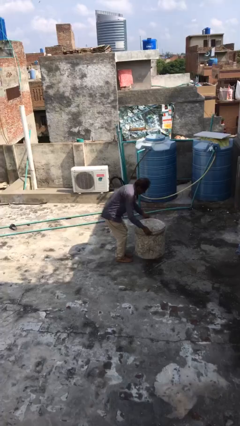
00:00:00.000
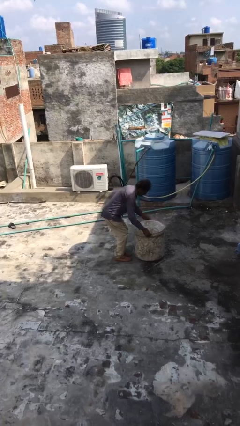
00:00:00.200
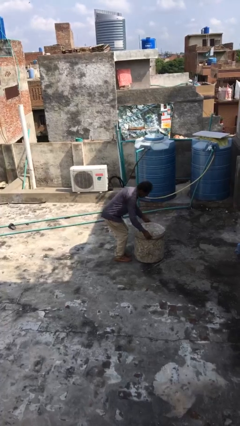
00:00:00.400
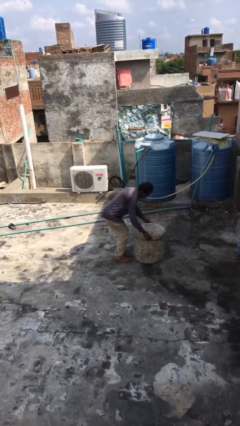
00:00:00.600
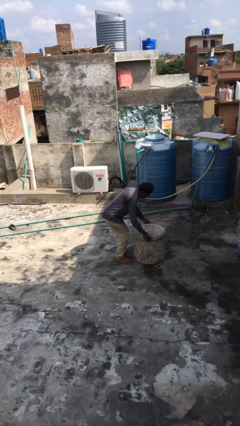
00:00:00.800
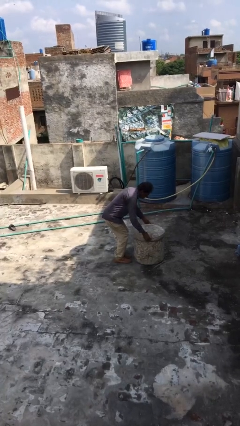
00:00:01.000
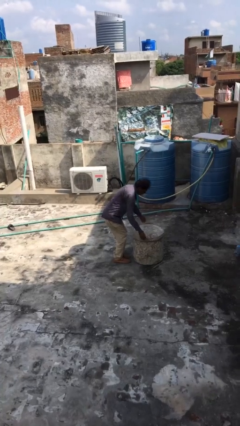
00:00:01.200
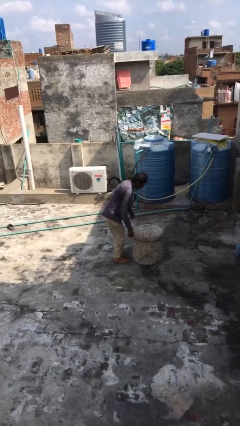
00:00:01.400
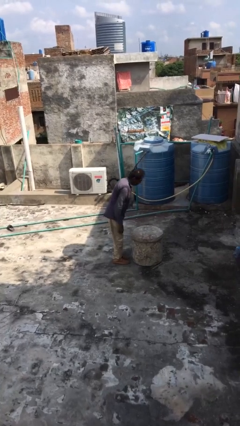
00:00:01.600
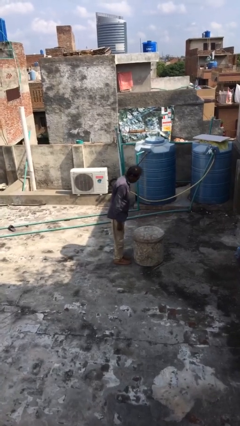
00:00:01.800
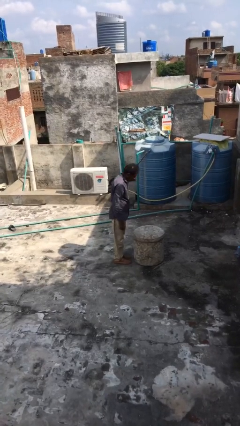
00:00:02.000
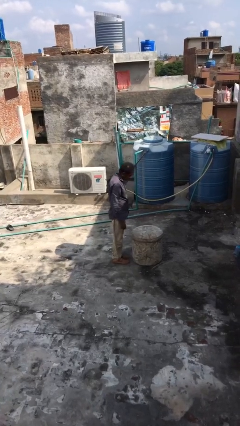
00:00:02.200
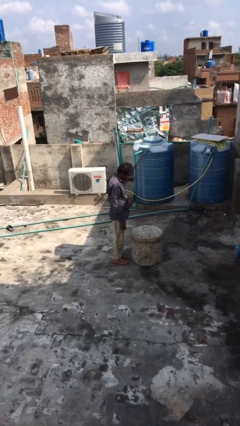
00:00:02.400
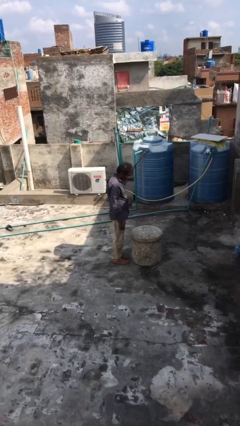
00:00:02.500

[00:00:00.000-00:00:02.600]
person puts down object on floor

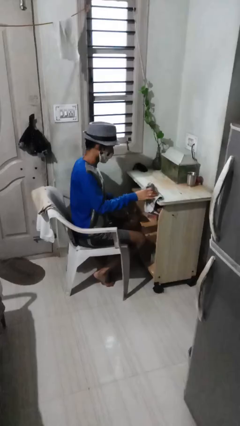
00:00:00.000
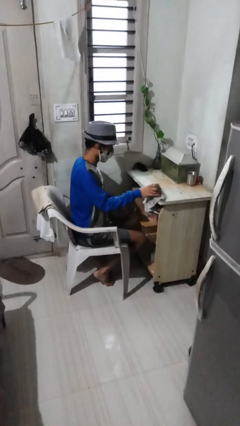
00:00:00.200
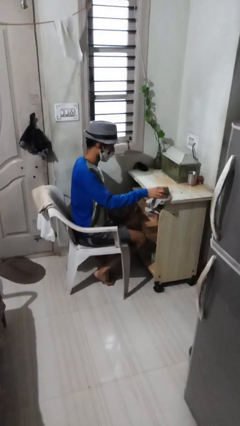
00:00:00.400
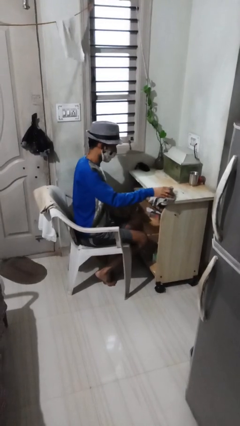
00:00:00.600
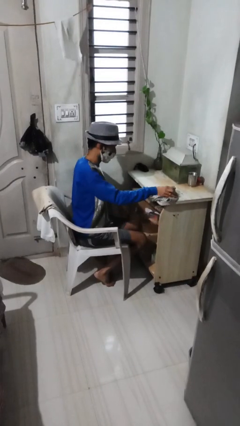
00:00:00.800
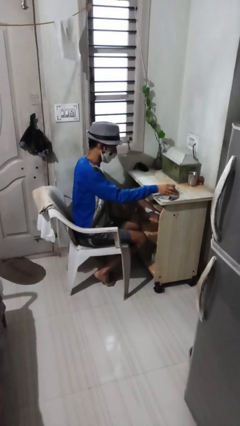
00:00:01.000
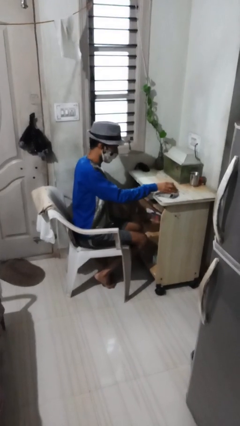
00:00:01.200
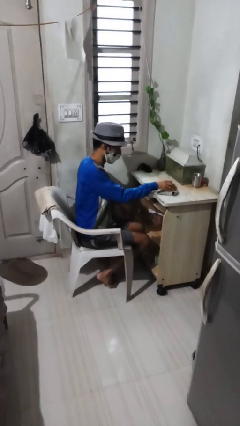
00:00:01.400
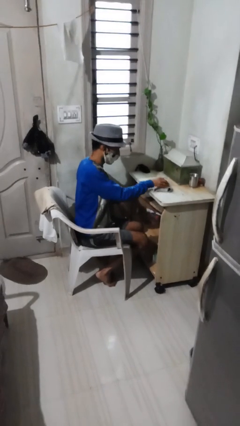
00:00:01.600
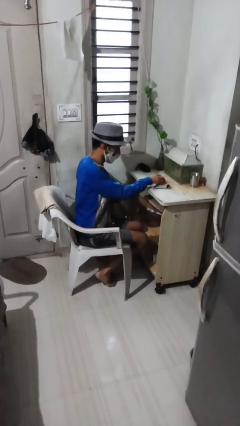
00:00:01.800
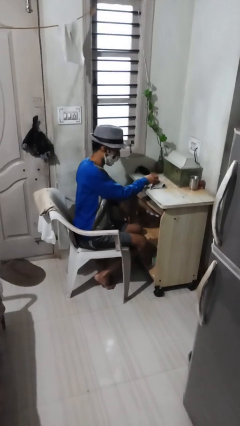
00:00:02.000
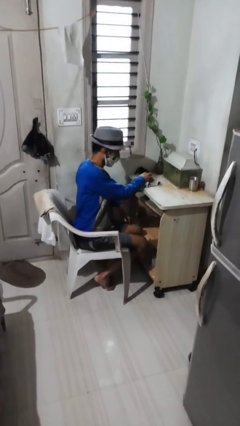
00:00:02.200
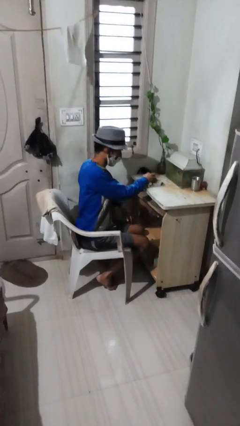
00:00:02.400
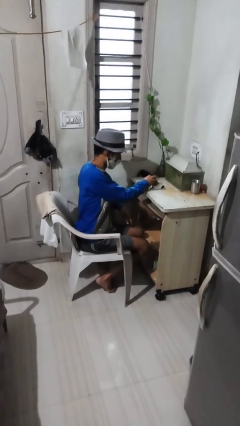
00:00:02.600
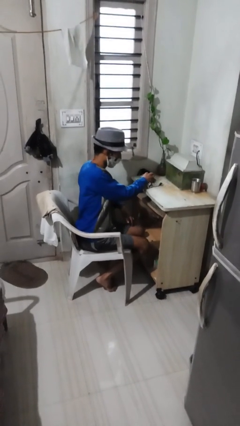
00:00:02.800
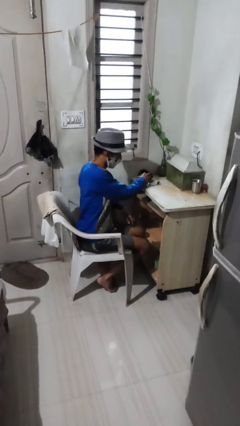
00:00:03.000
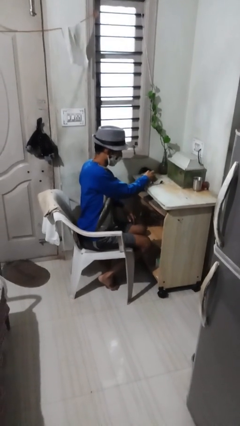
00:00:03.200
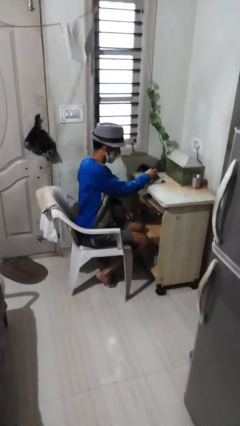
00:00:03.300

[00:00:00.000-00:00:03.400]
person cleans table with rag

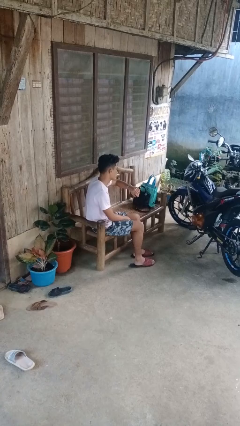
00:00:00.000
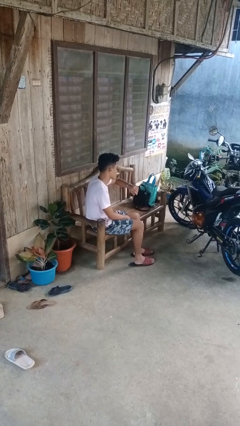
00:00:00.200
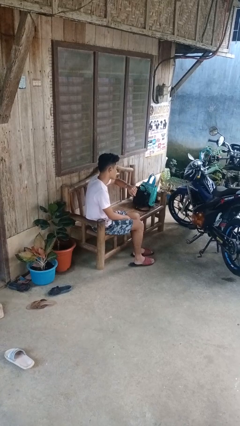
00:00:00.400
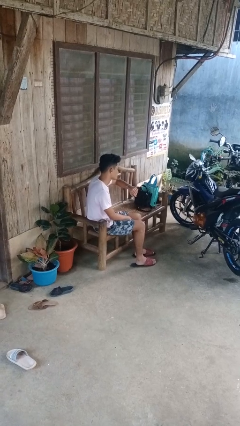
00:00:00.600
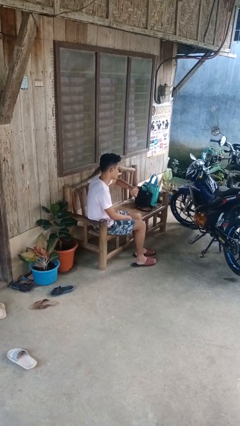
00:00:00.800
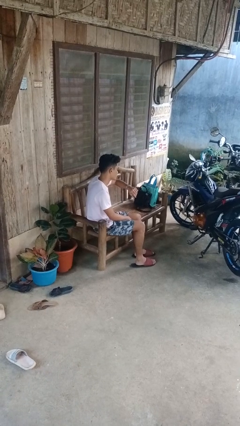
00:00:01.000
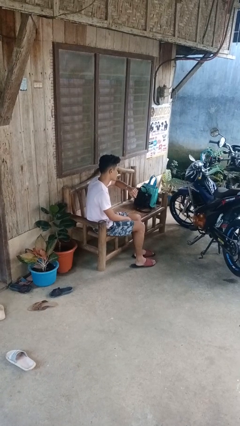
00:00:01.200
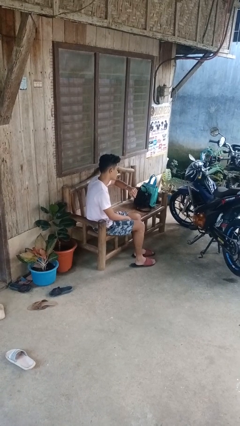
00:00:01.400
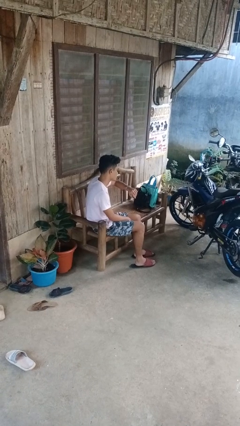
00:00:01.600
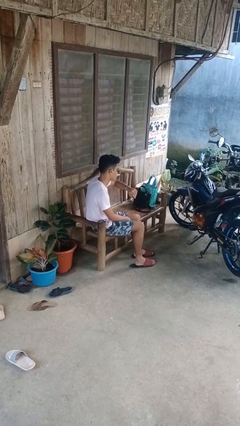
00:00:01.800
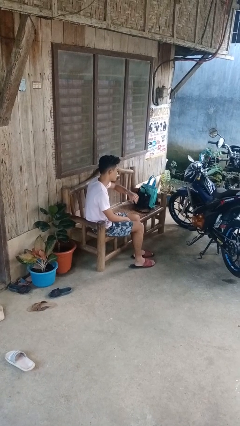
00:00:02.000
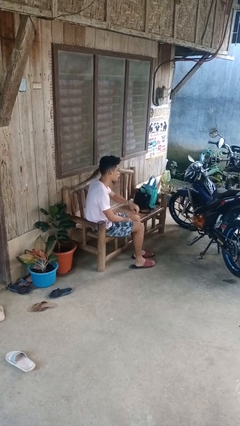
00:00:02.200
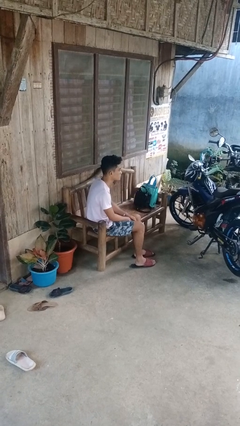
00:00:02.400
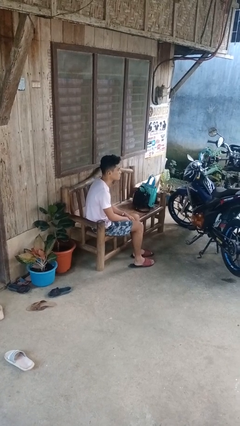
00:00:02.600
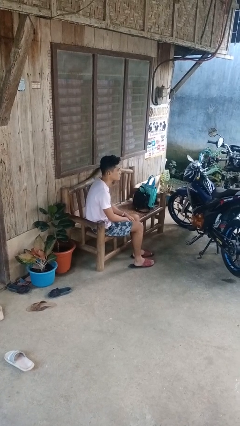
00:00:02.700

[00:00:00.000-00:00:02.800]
person looks at wristwatch

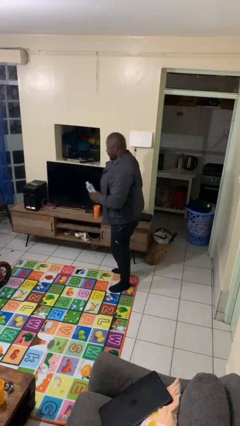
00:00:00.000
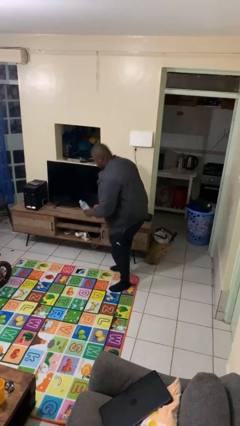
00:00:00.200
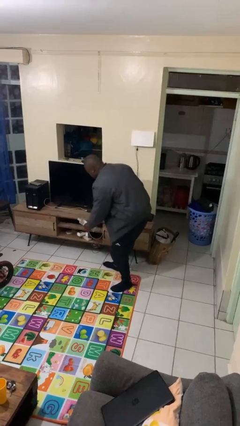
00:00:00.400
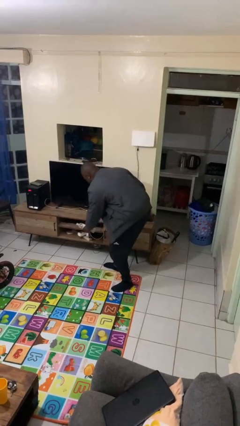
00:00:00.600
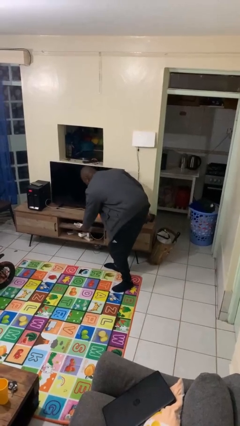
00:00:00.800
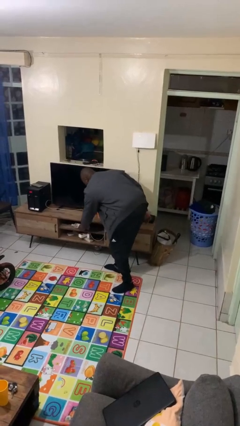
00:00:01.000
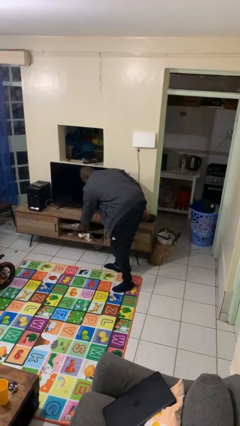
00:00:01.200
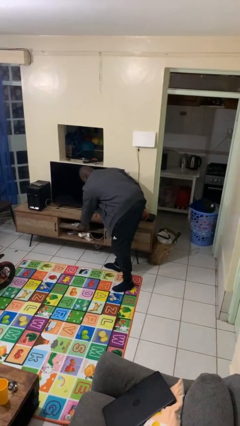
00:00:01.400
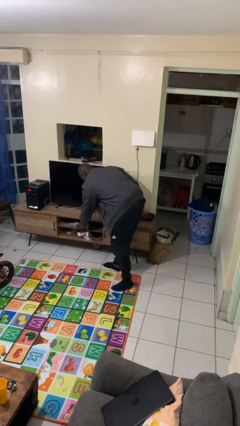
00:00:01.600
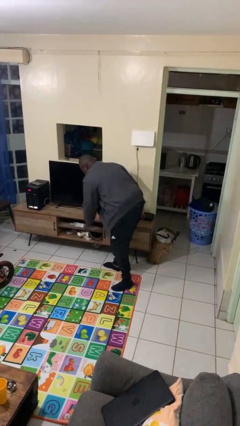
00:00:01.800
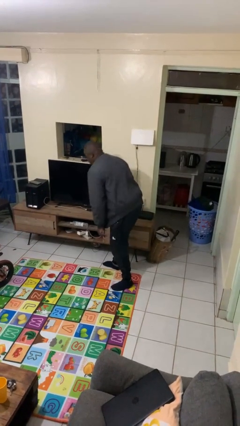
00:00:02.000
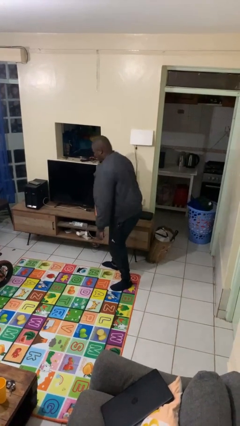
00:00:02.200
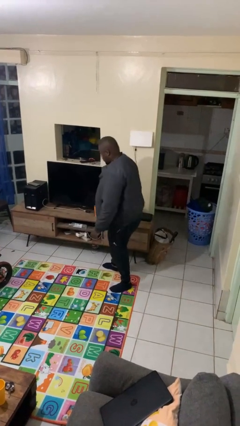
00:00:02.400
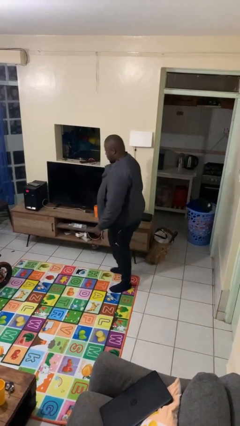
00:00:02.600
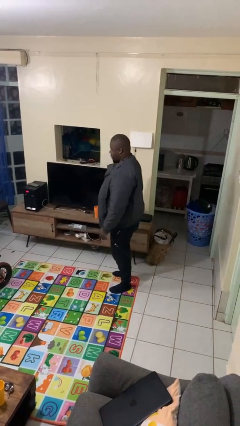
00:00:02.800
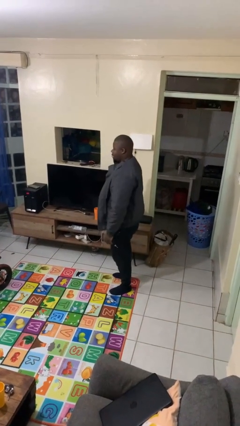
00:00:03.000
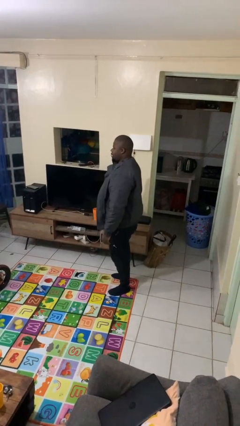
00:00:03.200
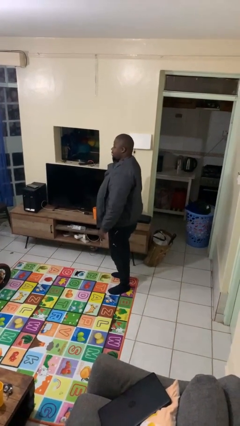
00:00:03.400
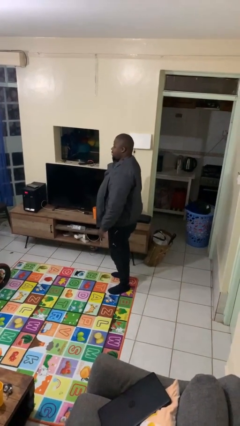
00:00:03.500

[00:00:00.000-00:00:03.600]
person puts down object into cabinet

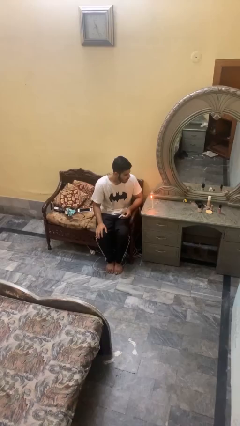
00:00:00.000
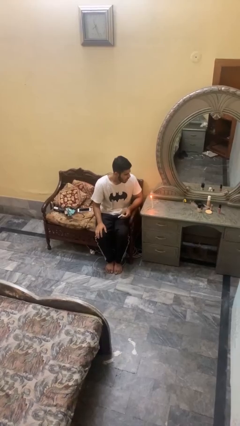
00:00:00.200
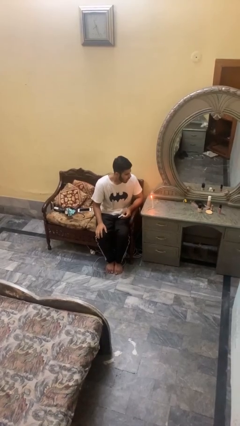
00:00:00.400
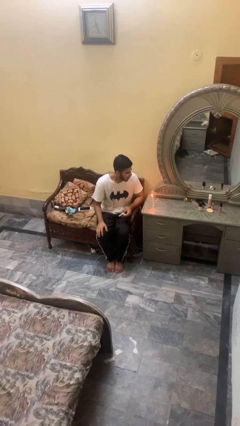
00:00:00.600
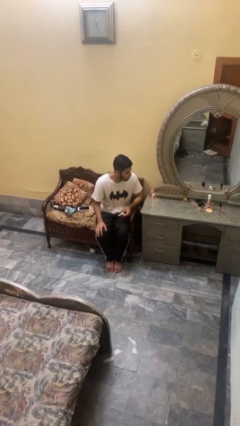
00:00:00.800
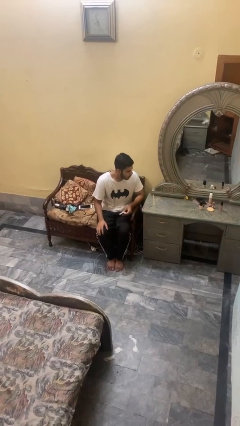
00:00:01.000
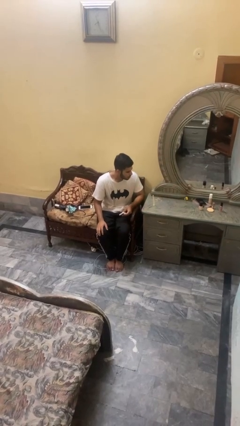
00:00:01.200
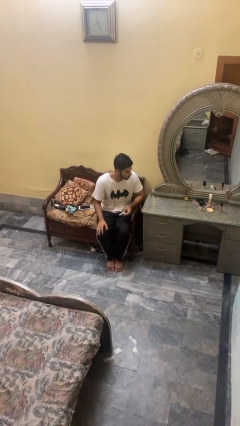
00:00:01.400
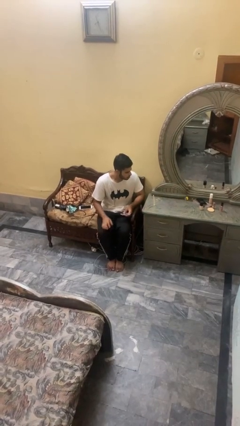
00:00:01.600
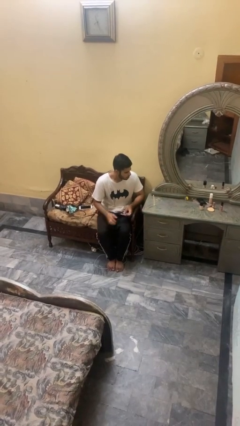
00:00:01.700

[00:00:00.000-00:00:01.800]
person extinguishes candle

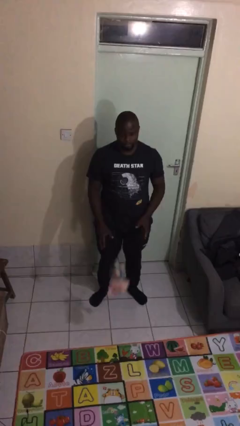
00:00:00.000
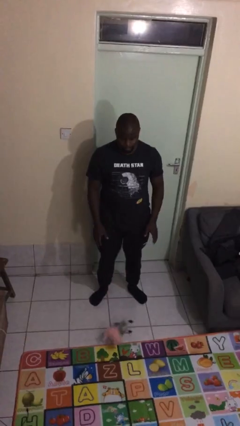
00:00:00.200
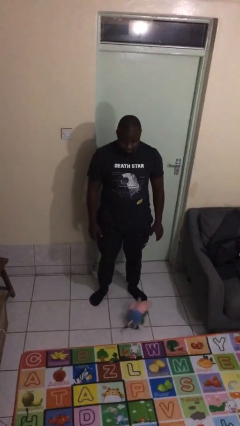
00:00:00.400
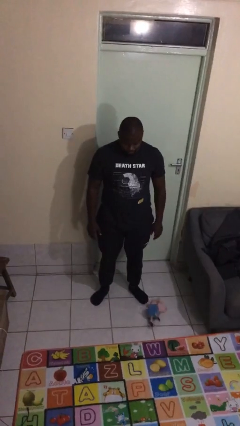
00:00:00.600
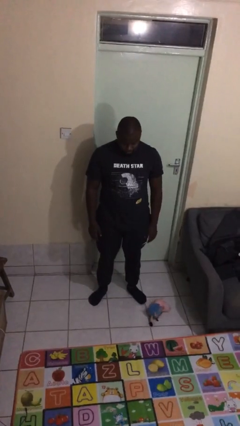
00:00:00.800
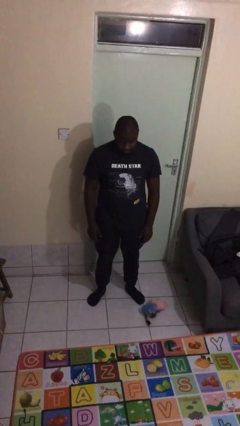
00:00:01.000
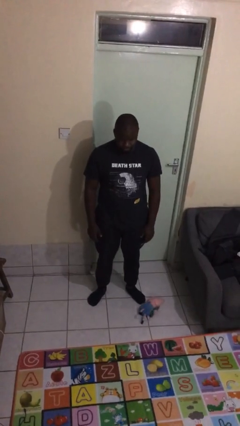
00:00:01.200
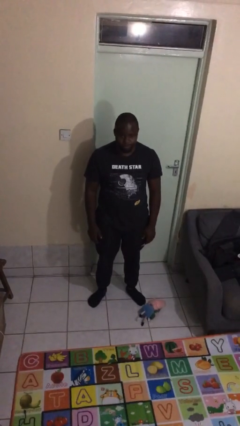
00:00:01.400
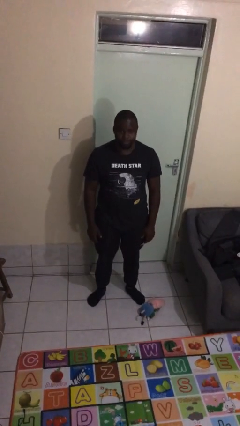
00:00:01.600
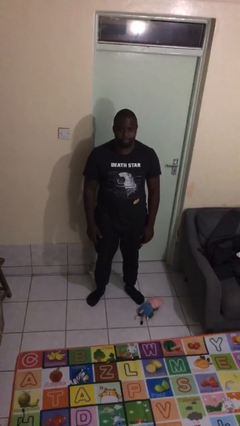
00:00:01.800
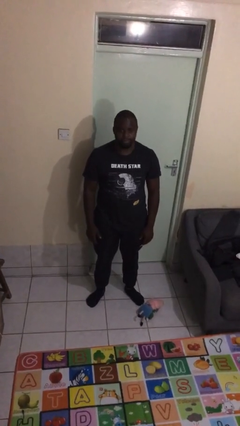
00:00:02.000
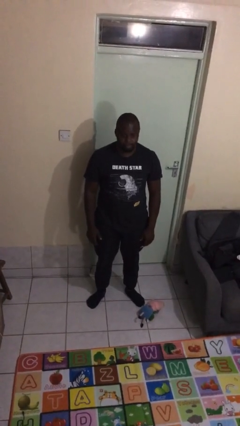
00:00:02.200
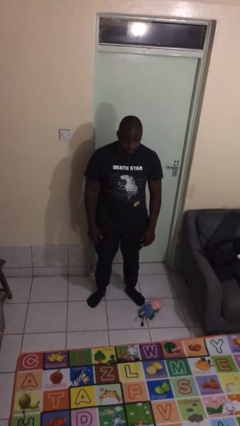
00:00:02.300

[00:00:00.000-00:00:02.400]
person drops object

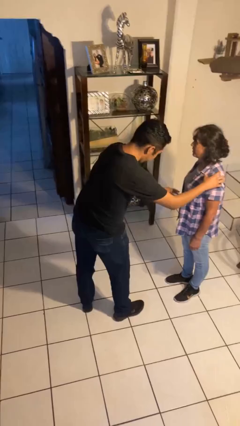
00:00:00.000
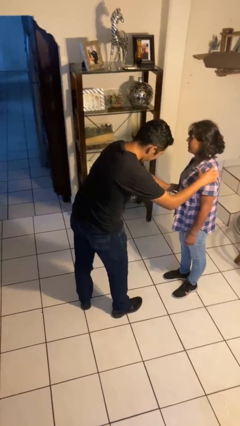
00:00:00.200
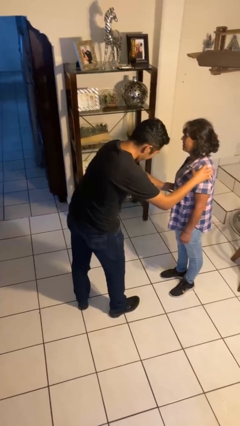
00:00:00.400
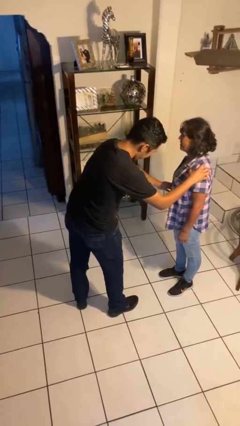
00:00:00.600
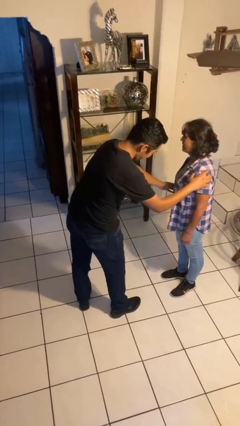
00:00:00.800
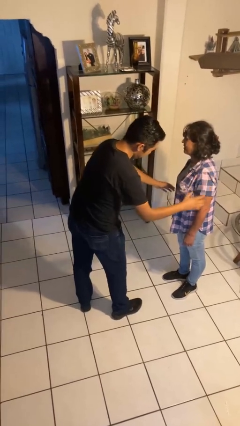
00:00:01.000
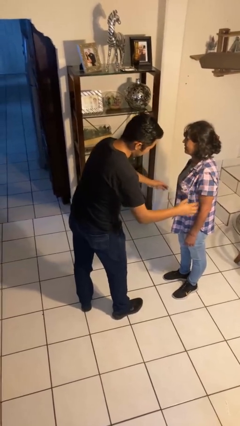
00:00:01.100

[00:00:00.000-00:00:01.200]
person tickles person
